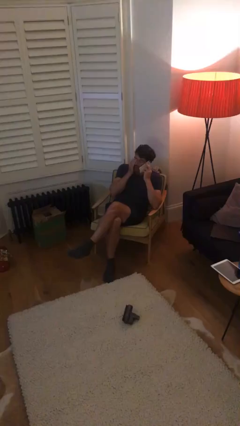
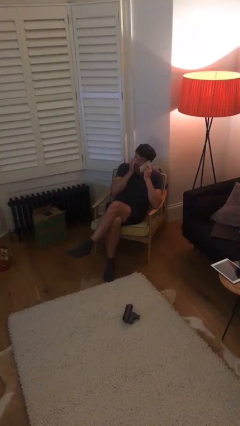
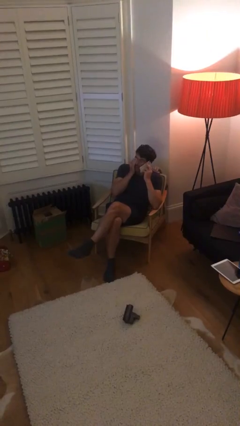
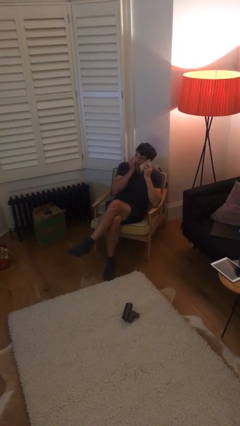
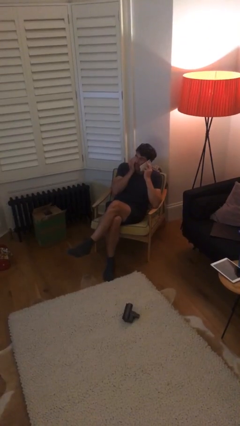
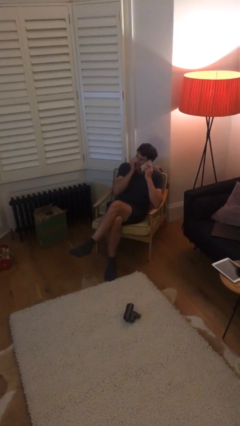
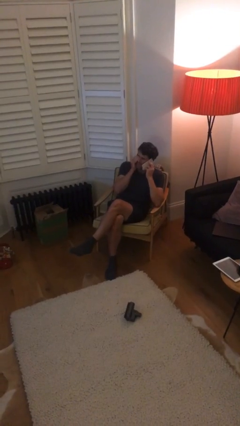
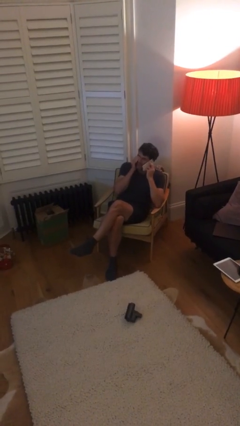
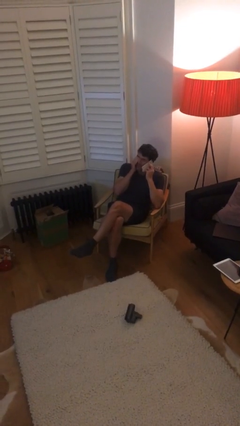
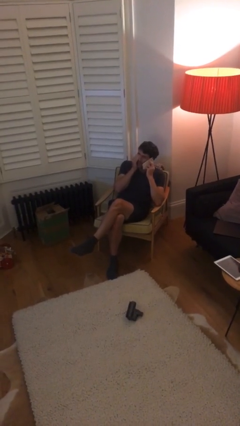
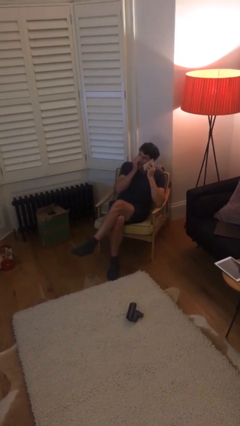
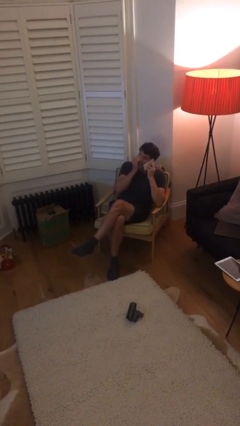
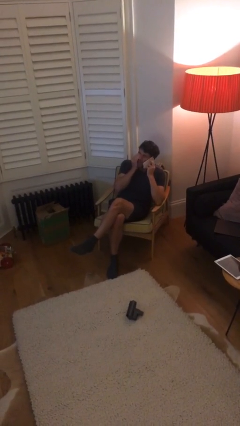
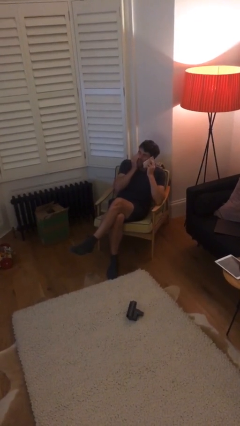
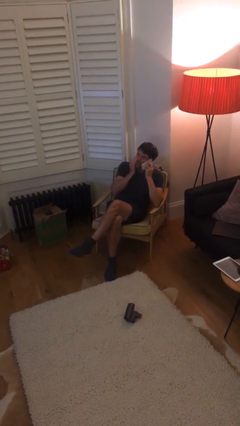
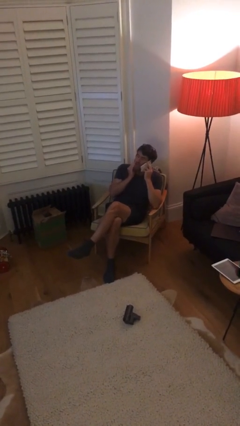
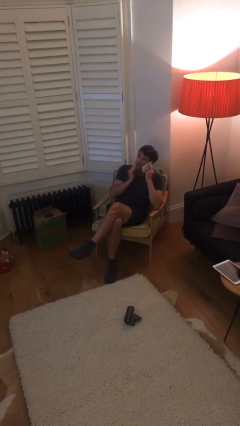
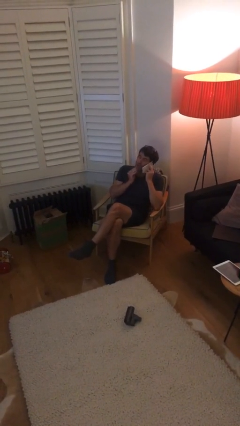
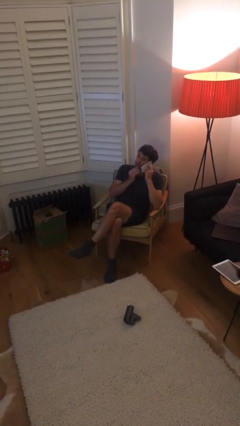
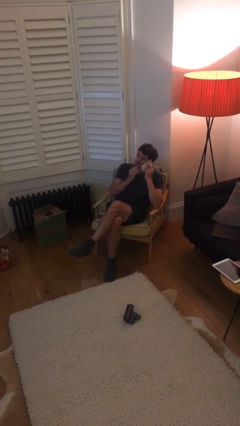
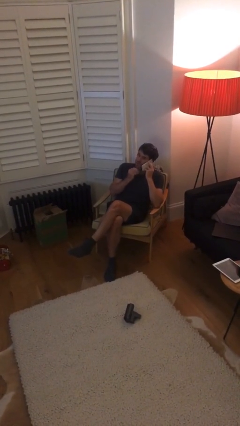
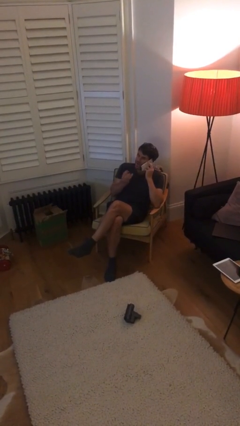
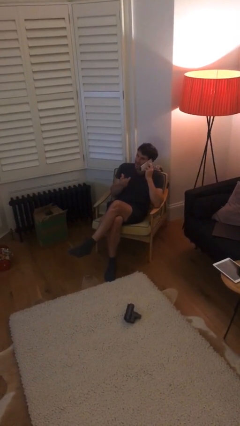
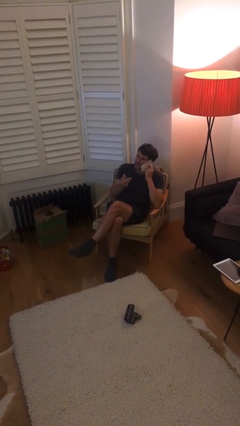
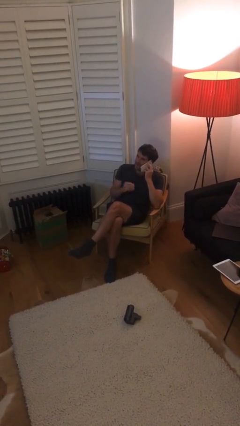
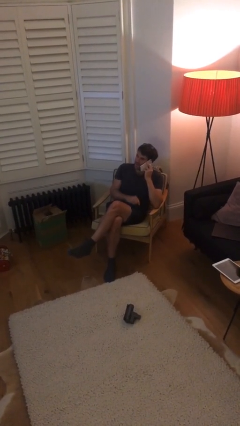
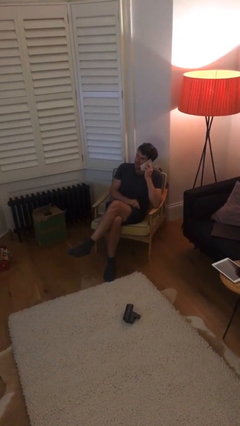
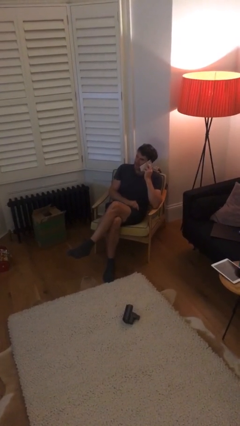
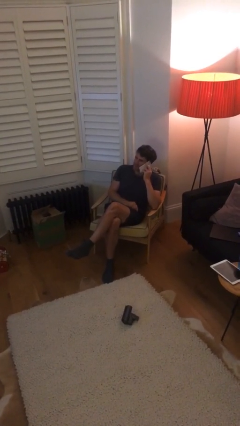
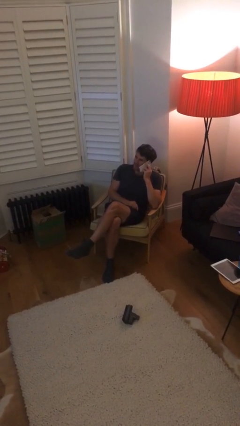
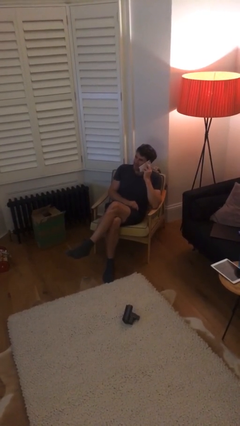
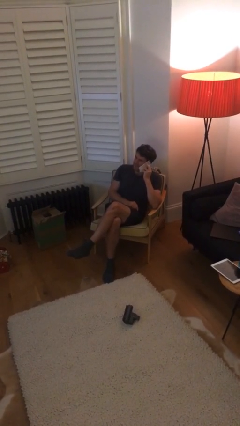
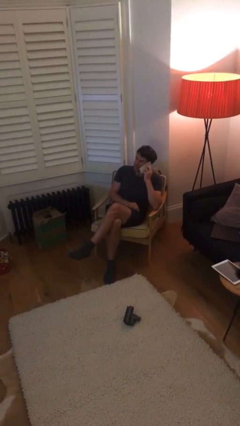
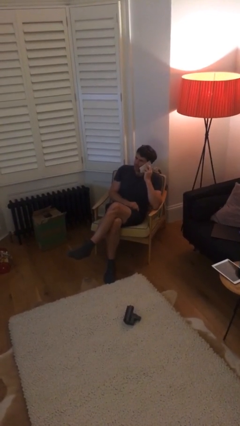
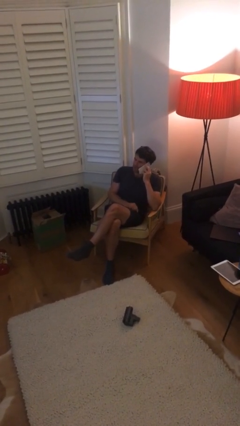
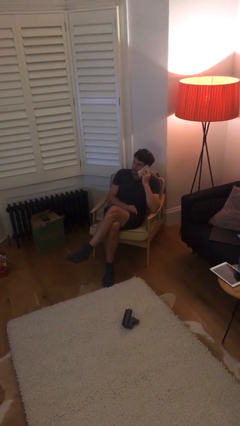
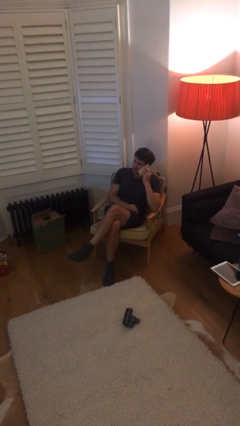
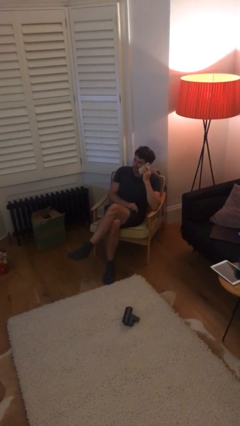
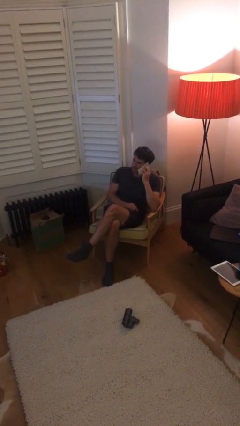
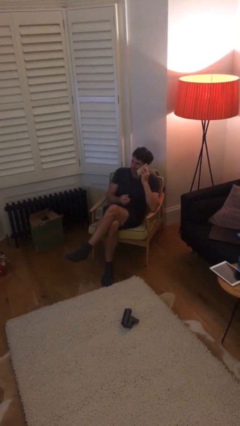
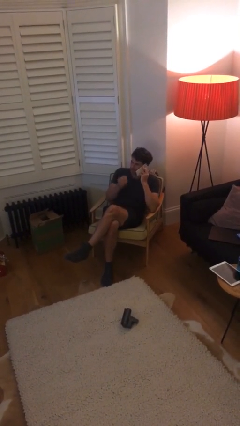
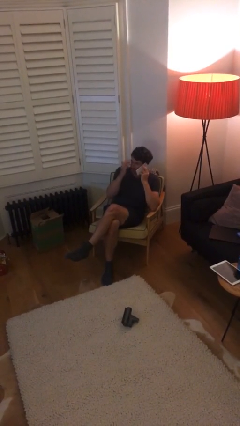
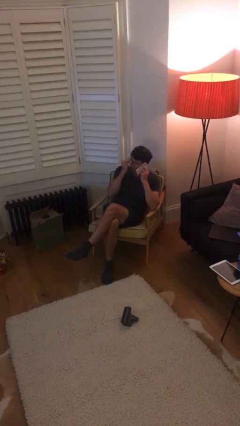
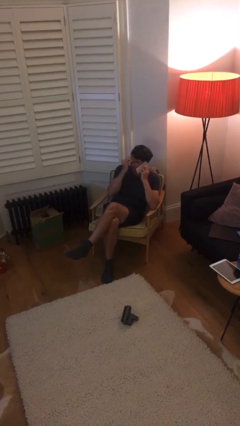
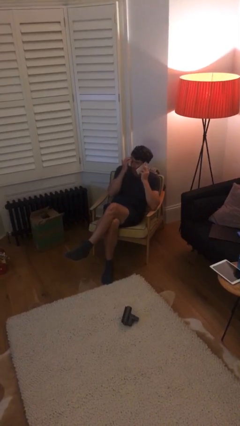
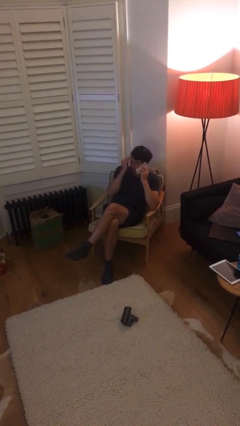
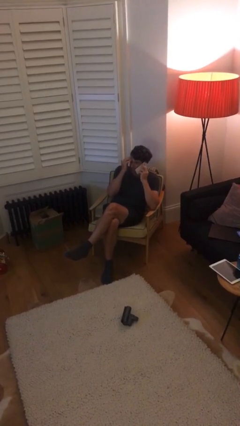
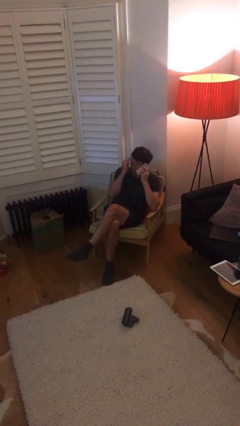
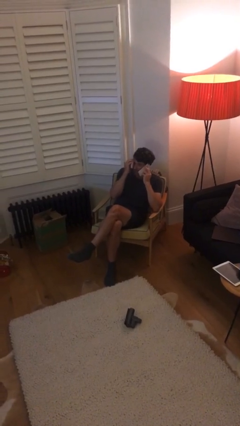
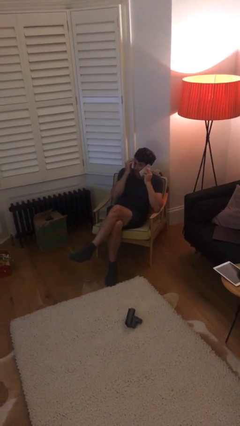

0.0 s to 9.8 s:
person talks on phone

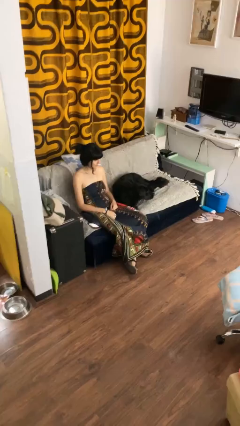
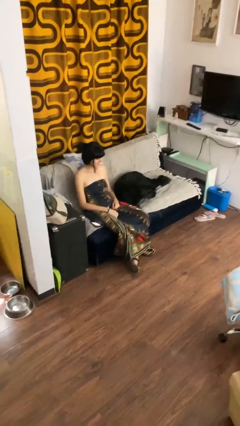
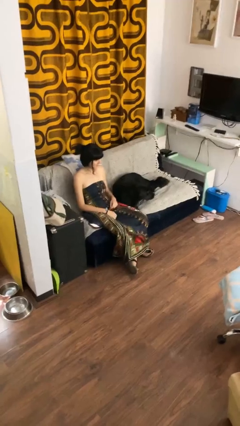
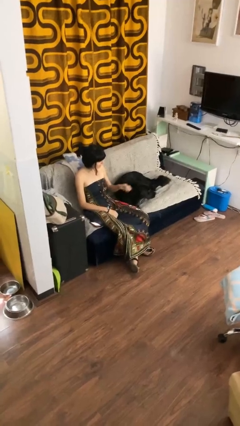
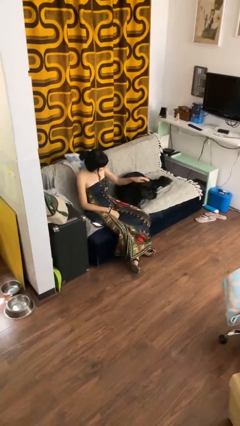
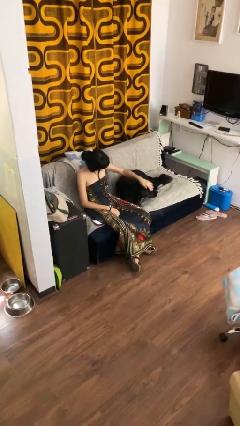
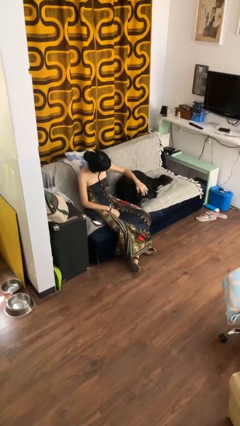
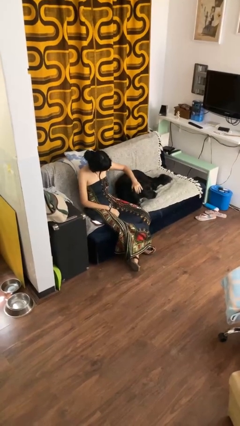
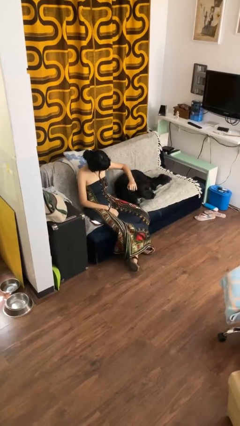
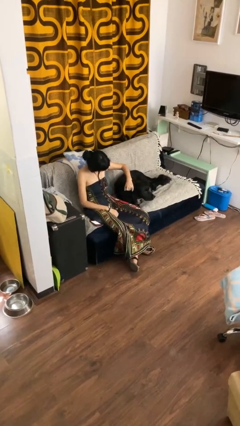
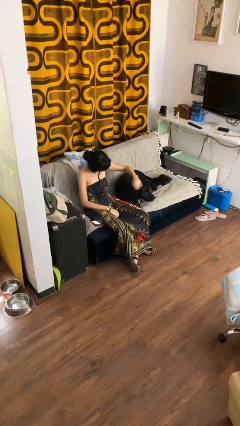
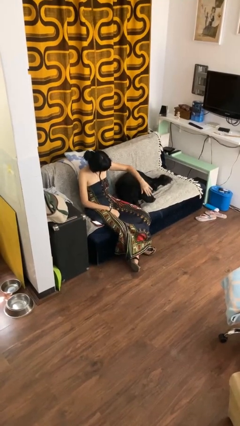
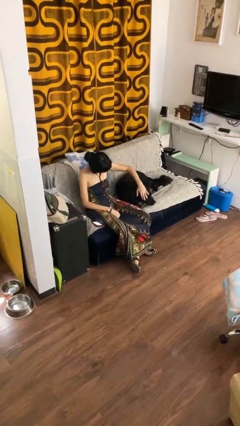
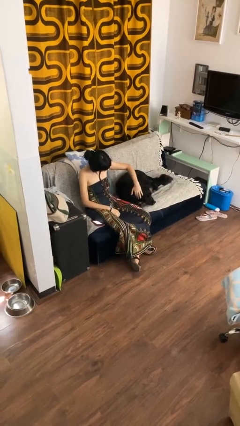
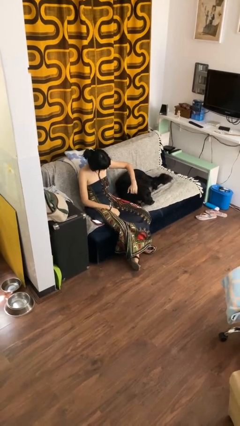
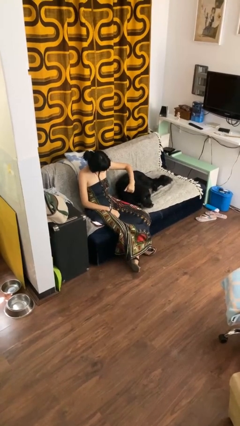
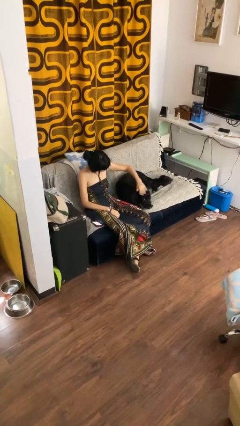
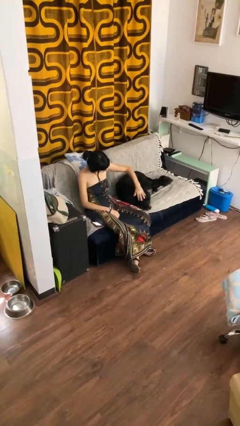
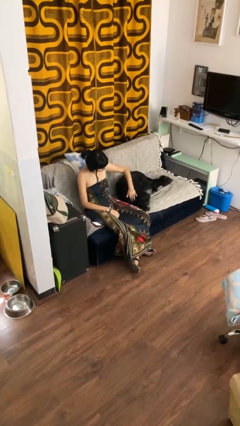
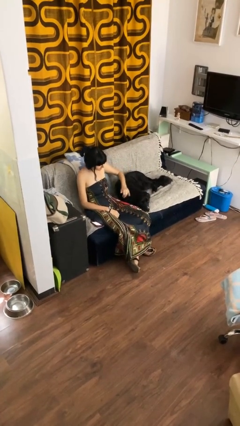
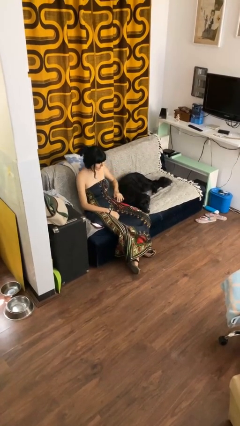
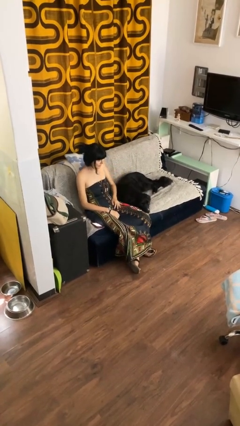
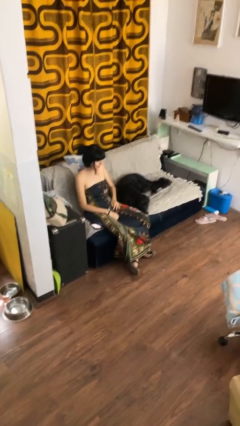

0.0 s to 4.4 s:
person pets dog

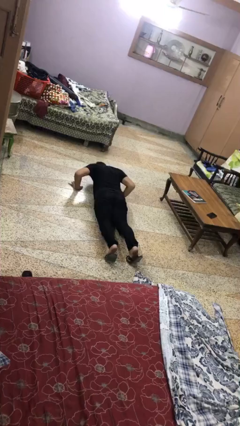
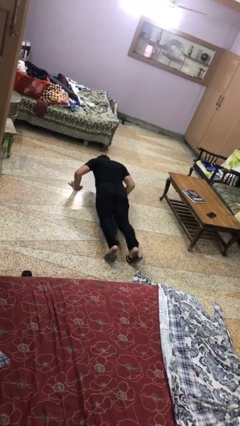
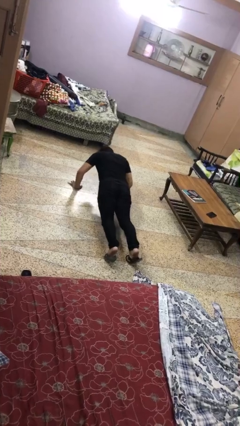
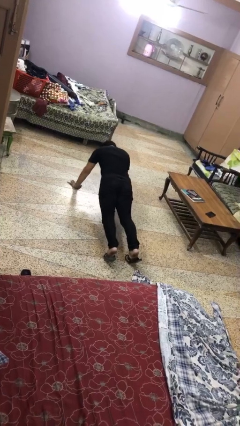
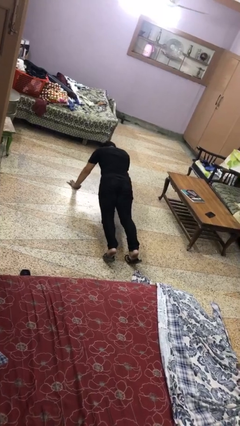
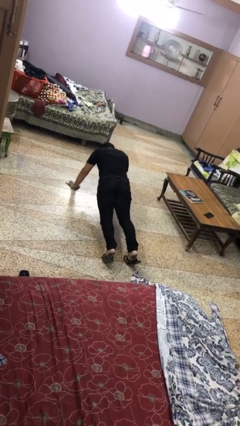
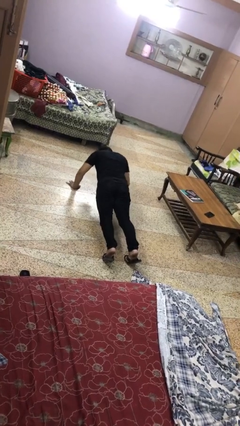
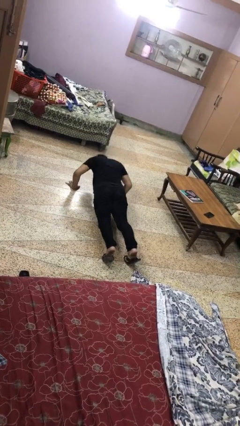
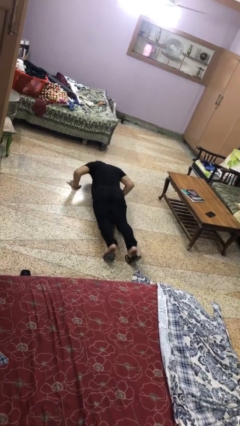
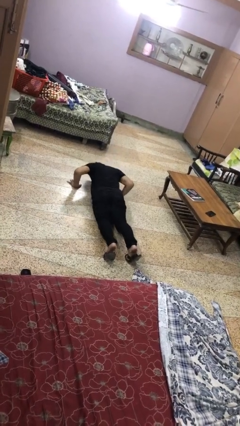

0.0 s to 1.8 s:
person exercises with pushup

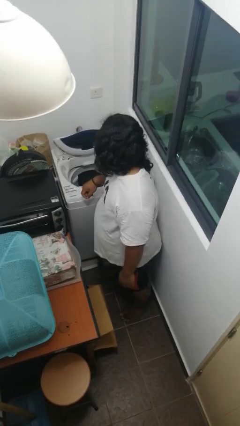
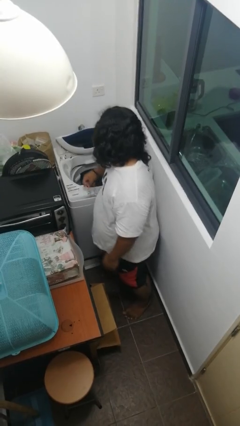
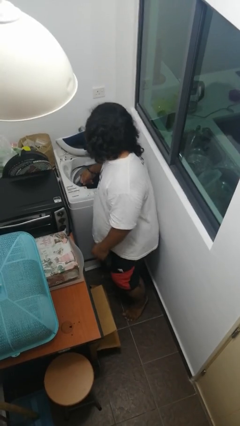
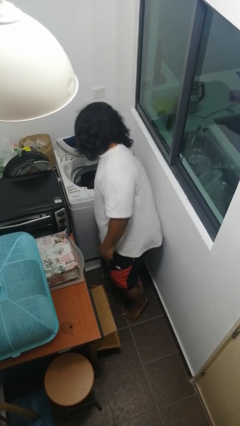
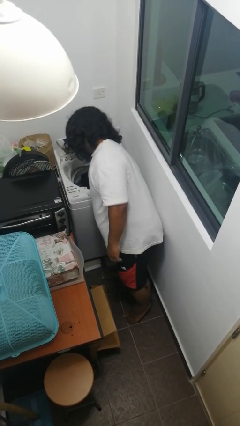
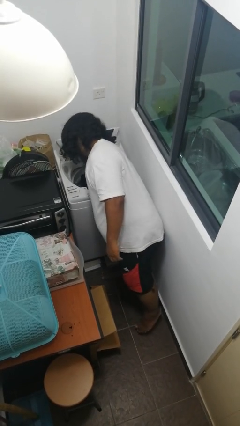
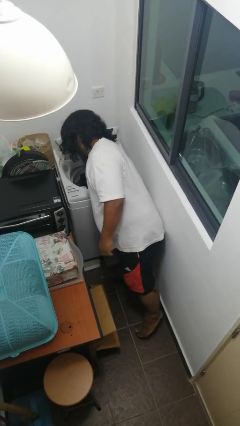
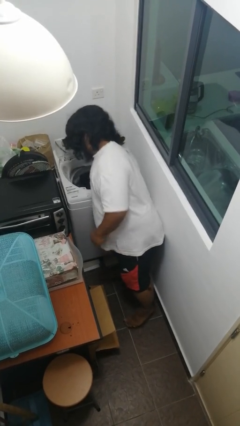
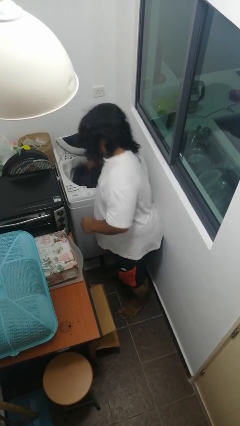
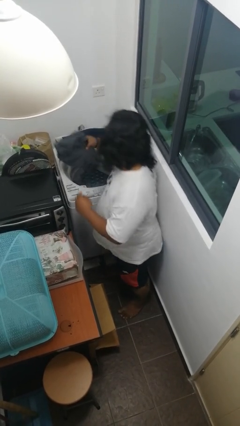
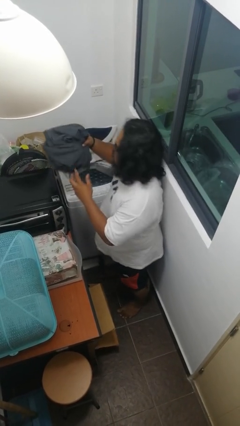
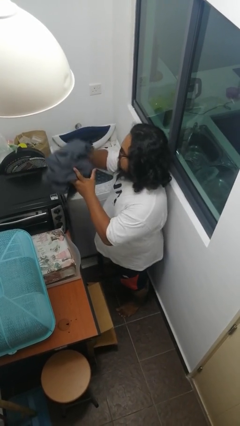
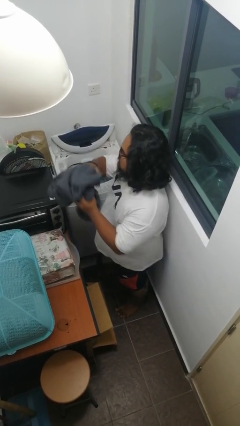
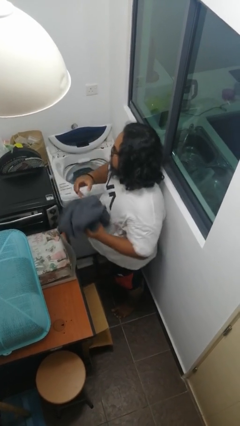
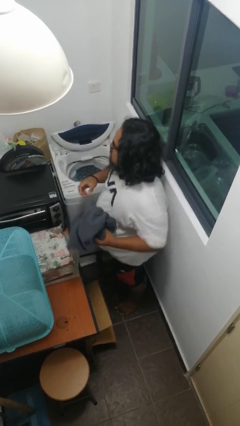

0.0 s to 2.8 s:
person unloads clotheswasher
